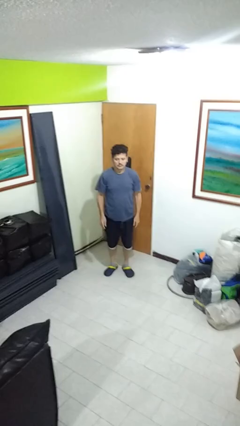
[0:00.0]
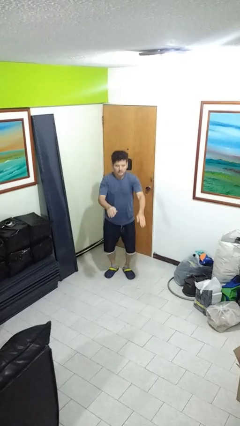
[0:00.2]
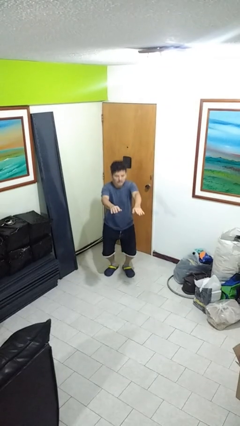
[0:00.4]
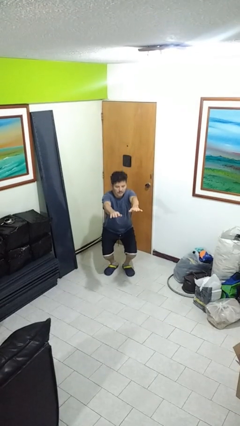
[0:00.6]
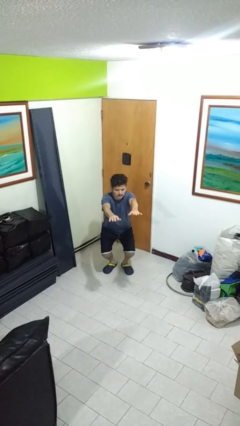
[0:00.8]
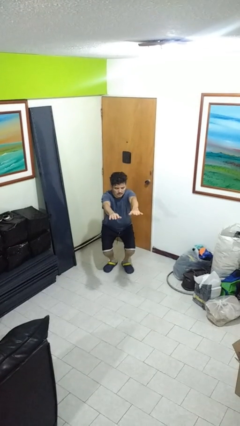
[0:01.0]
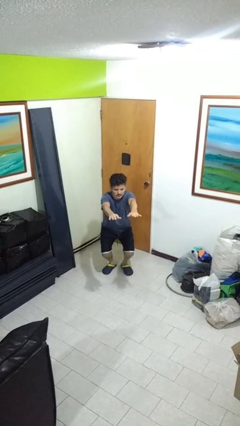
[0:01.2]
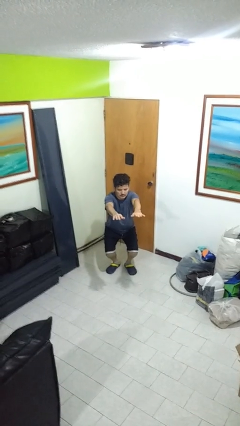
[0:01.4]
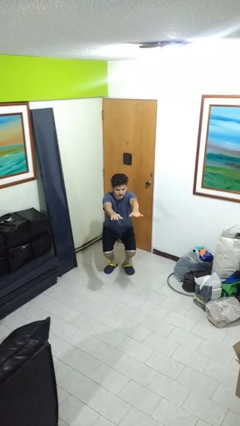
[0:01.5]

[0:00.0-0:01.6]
person squats

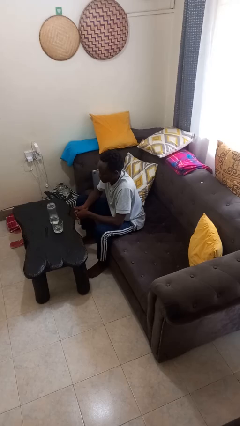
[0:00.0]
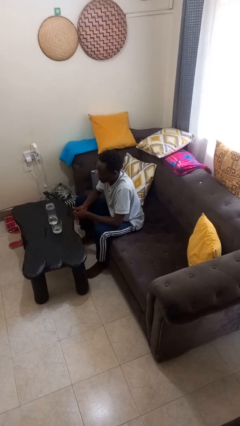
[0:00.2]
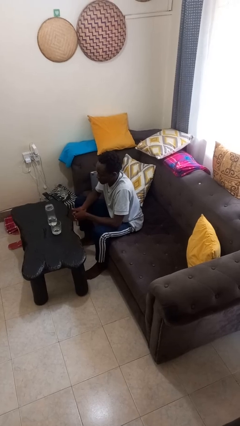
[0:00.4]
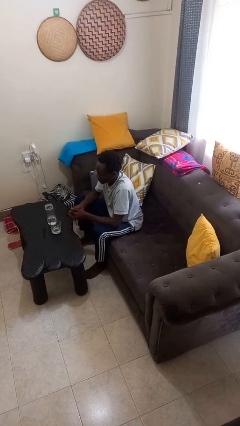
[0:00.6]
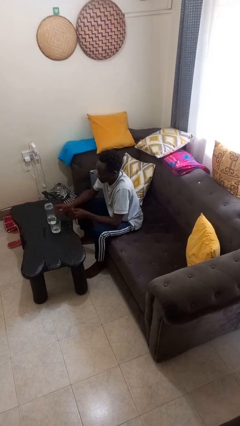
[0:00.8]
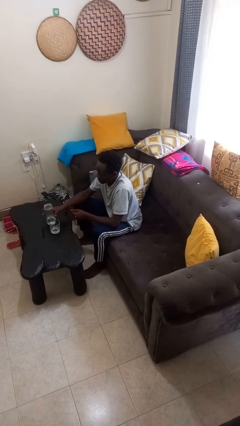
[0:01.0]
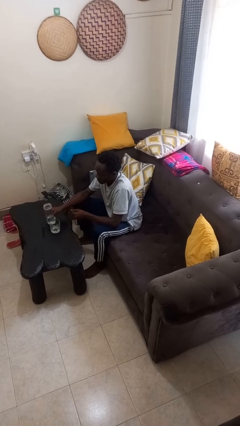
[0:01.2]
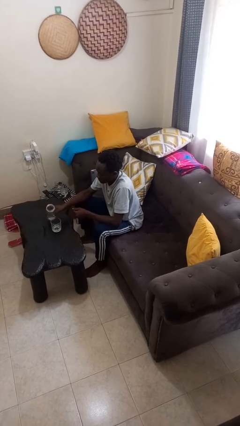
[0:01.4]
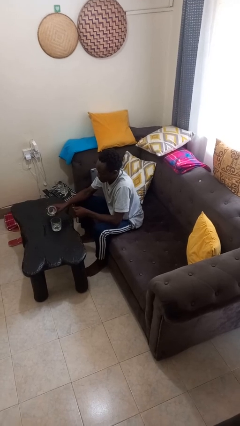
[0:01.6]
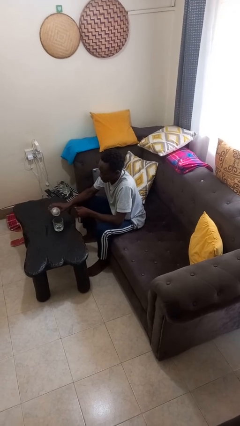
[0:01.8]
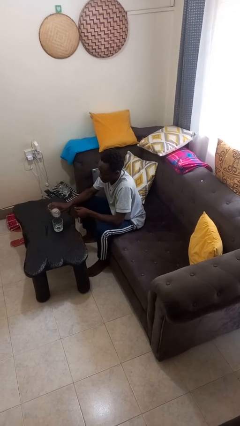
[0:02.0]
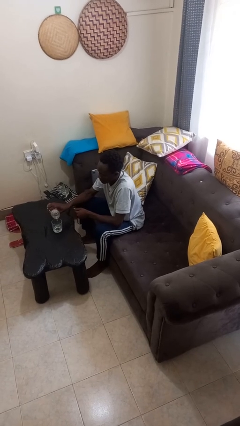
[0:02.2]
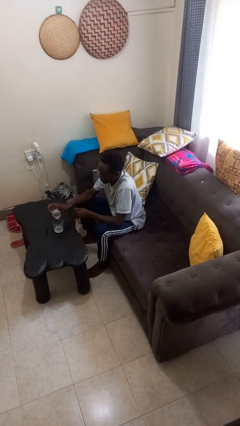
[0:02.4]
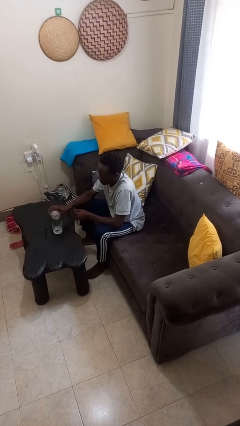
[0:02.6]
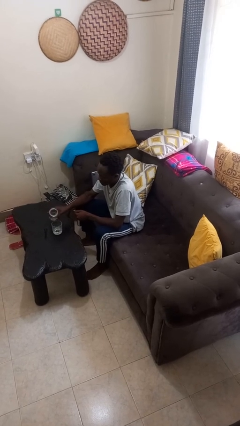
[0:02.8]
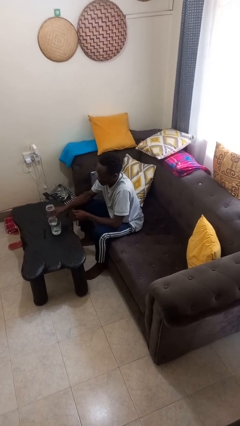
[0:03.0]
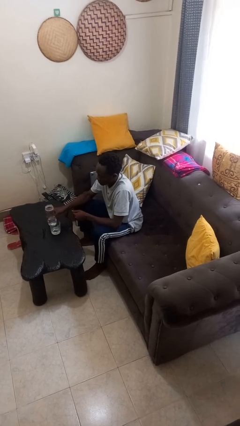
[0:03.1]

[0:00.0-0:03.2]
person pours liquid into cup

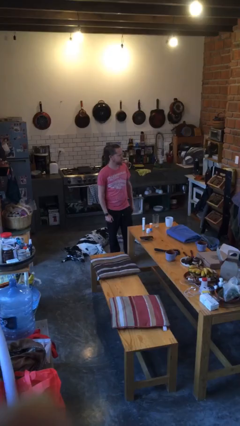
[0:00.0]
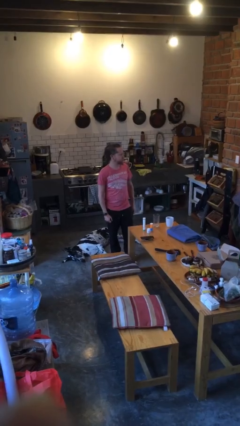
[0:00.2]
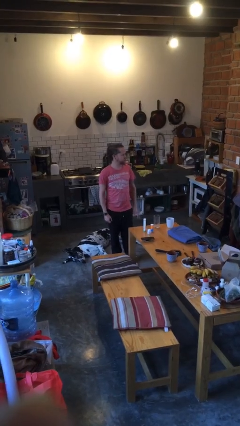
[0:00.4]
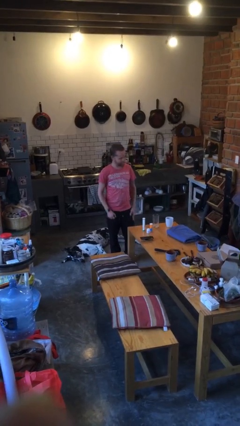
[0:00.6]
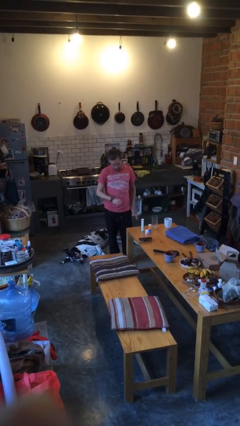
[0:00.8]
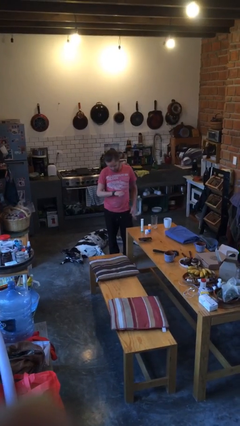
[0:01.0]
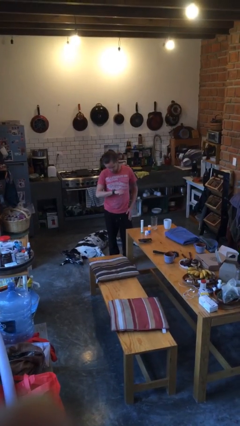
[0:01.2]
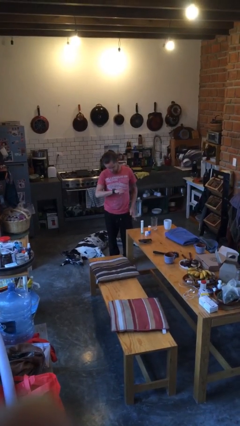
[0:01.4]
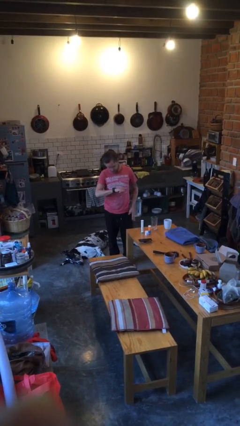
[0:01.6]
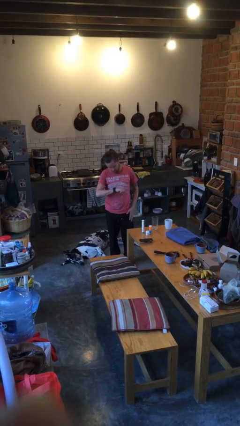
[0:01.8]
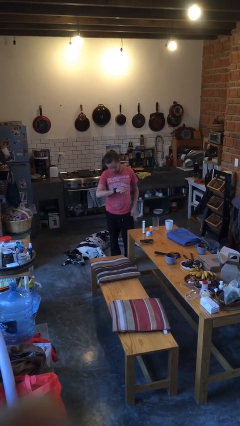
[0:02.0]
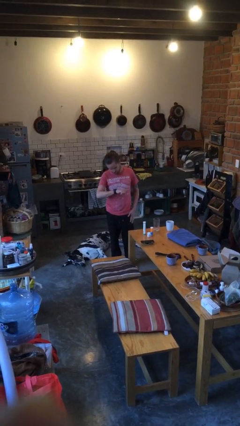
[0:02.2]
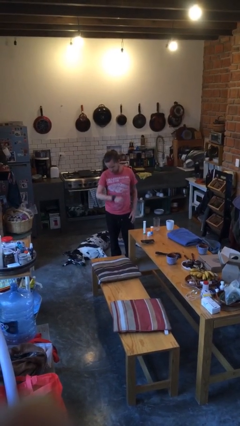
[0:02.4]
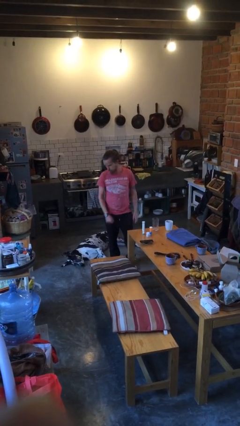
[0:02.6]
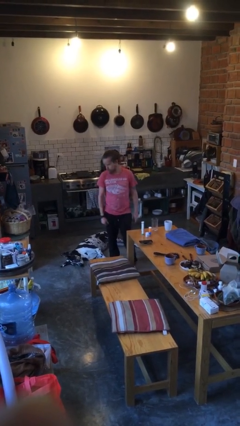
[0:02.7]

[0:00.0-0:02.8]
person looks at wristwatch

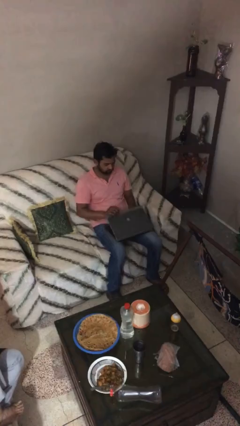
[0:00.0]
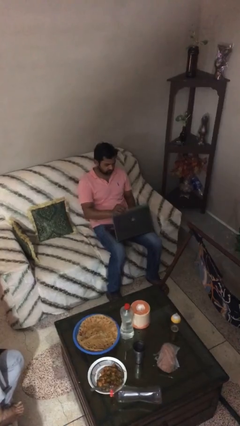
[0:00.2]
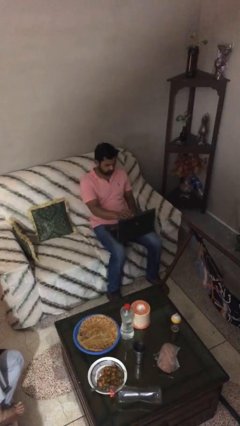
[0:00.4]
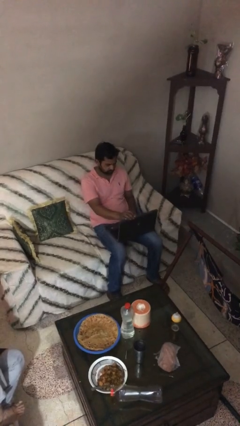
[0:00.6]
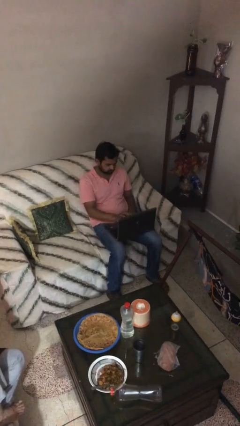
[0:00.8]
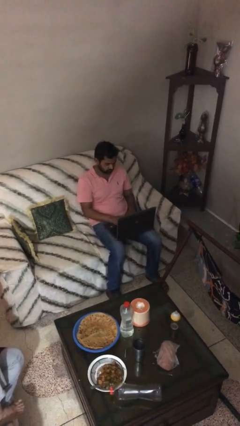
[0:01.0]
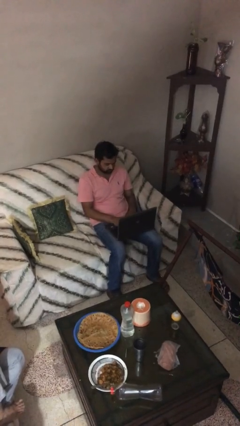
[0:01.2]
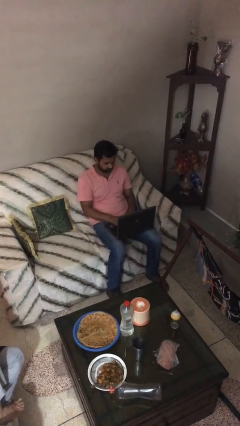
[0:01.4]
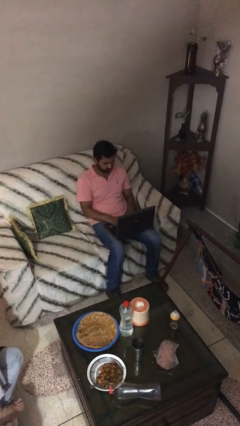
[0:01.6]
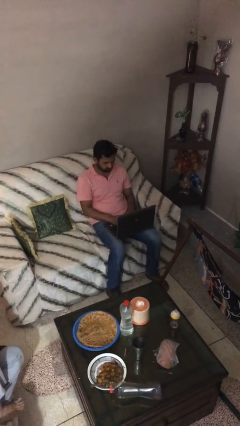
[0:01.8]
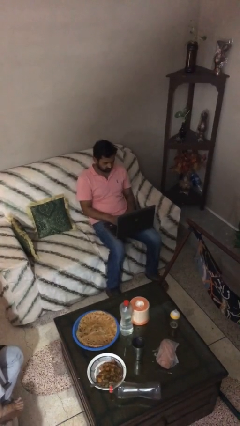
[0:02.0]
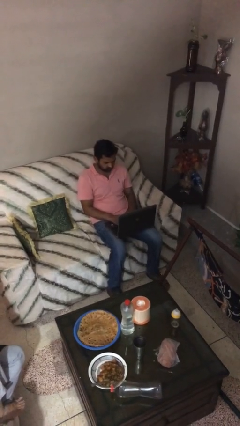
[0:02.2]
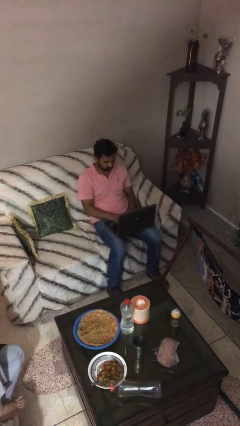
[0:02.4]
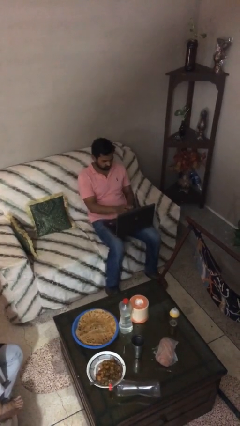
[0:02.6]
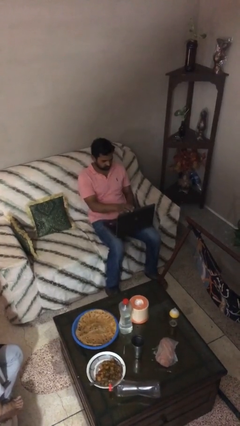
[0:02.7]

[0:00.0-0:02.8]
person interacts with laptop

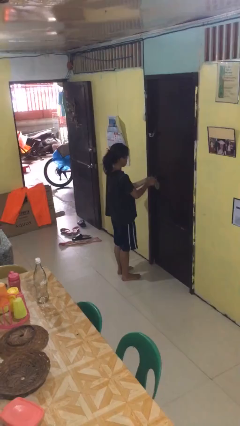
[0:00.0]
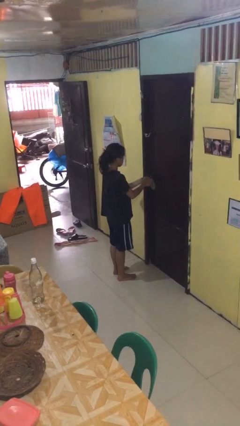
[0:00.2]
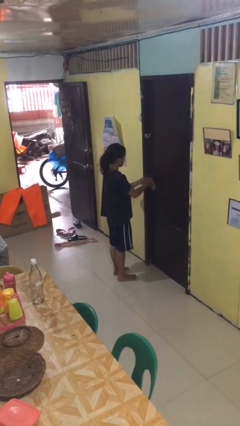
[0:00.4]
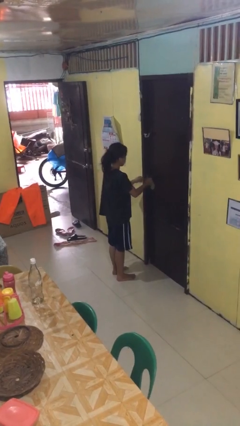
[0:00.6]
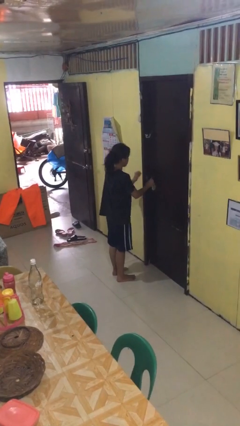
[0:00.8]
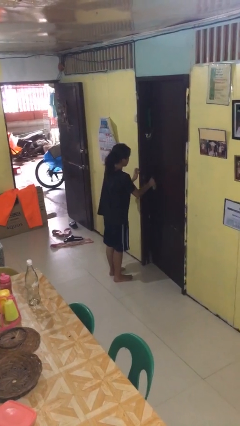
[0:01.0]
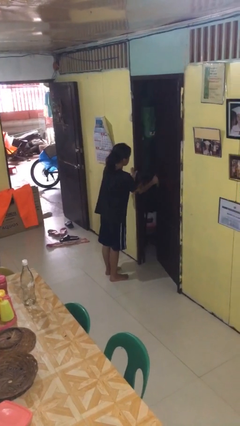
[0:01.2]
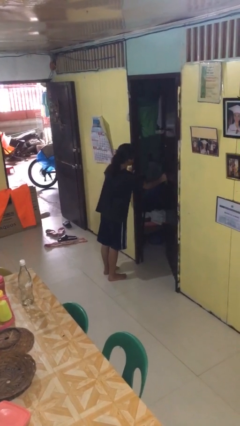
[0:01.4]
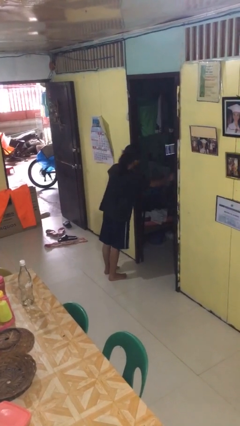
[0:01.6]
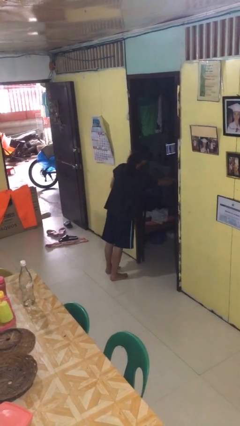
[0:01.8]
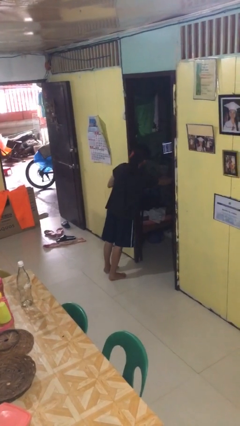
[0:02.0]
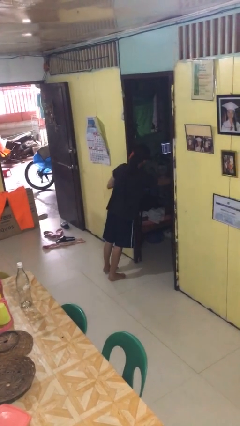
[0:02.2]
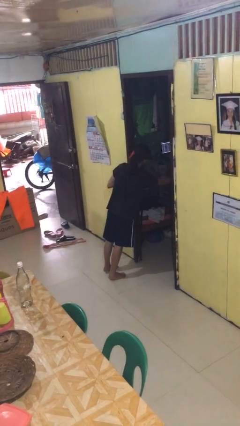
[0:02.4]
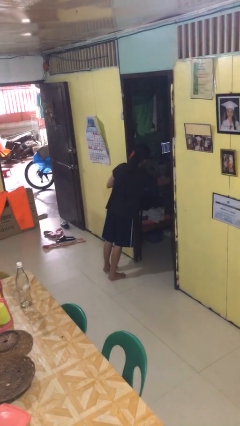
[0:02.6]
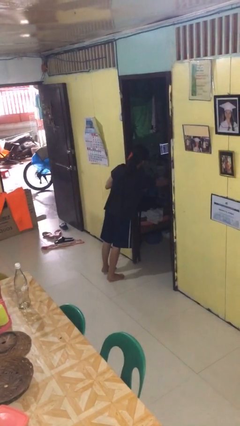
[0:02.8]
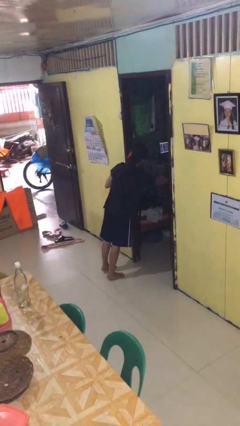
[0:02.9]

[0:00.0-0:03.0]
person opens facility door

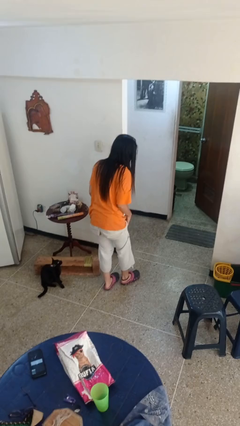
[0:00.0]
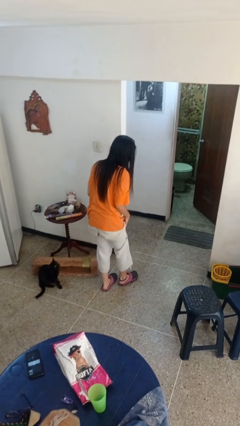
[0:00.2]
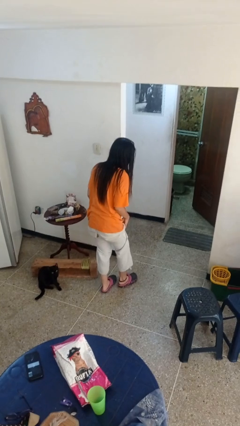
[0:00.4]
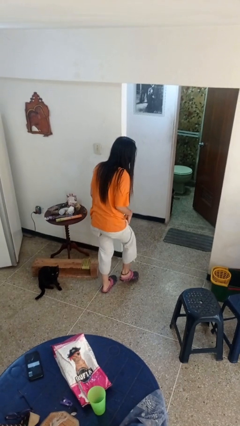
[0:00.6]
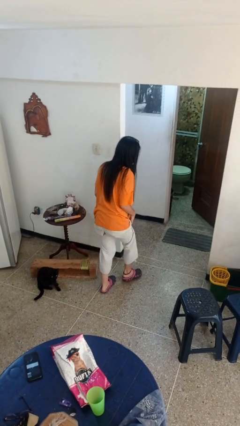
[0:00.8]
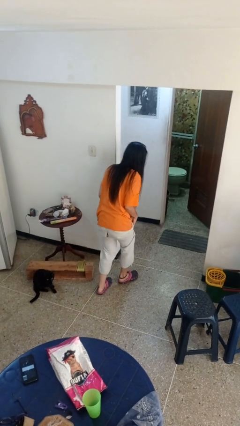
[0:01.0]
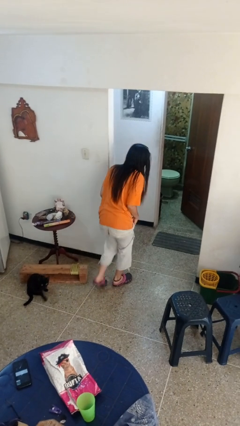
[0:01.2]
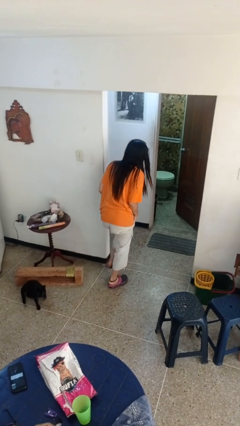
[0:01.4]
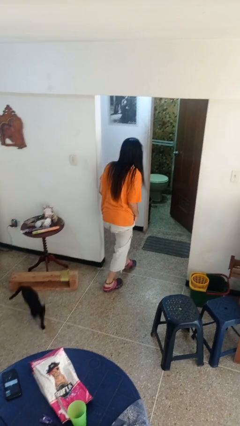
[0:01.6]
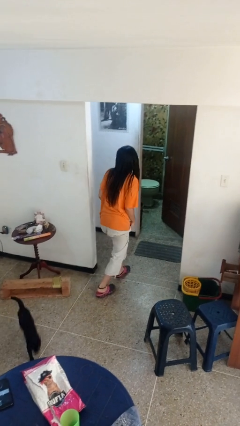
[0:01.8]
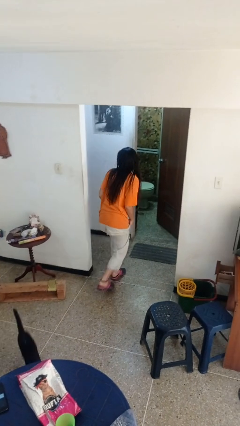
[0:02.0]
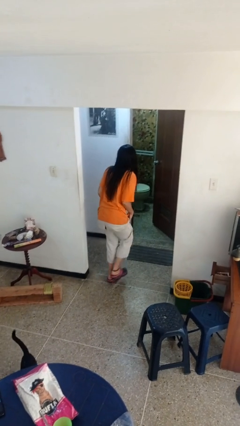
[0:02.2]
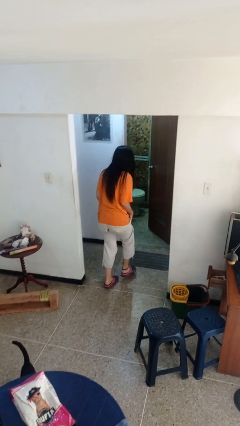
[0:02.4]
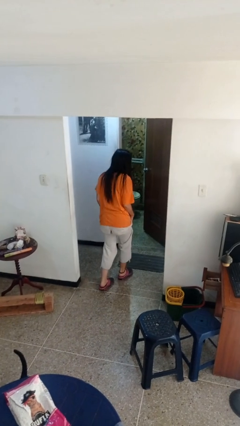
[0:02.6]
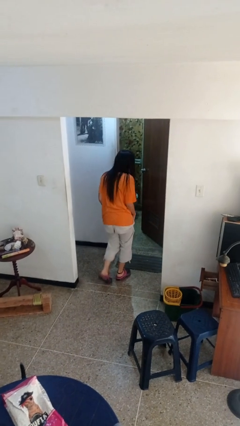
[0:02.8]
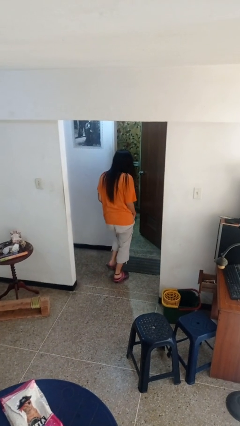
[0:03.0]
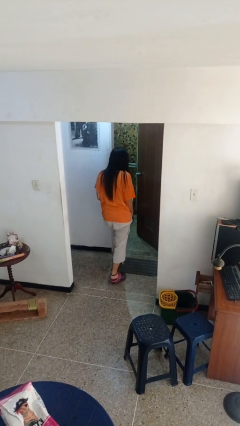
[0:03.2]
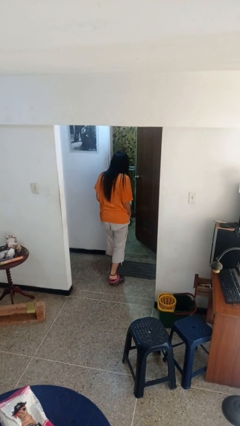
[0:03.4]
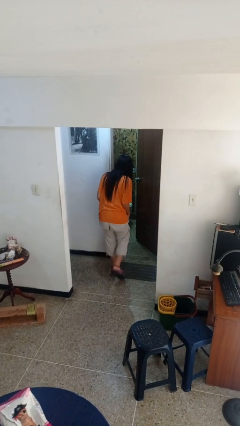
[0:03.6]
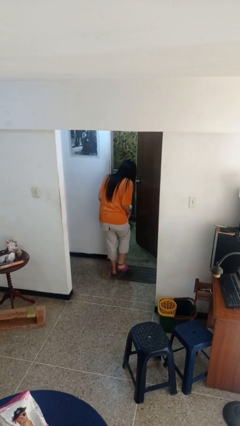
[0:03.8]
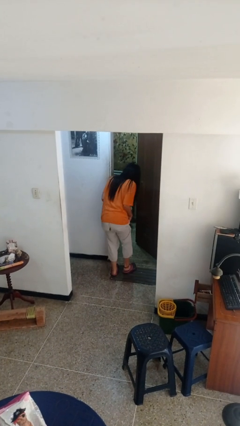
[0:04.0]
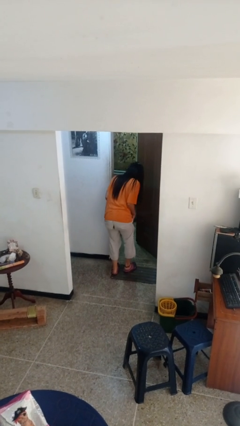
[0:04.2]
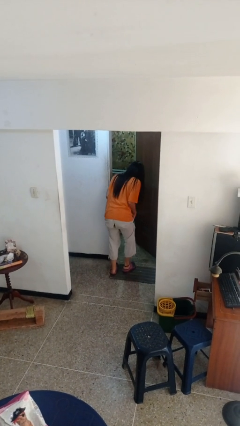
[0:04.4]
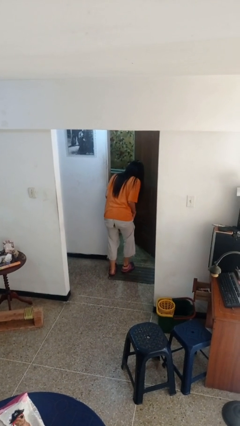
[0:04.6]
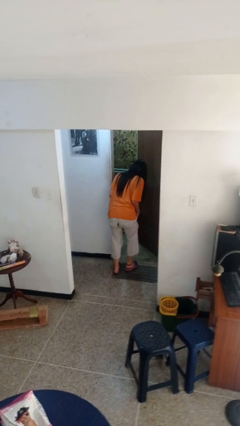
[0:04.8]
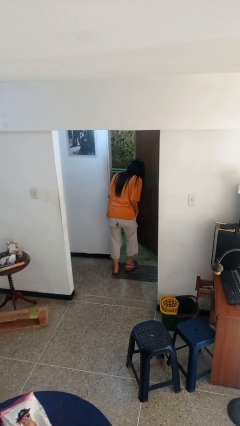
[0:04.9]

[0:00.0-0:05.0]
person walks tiptoe
